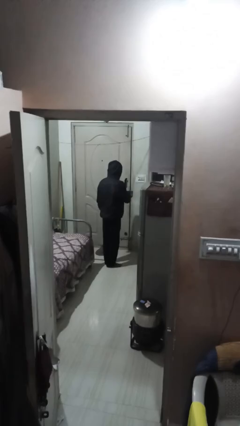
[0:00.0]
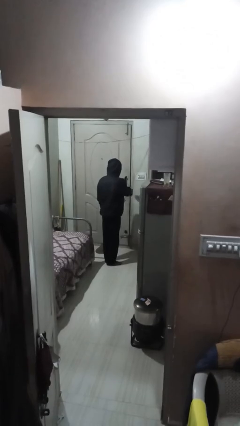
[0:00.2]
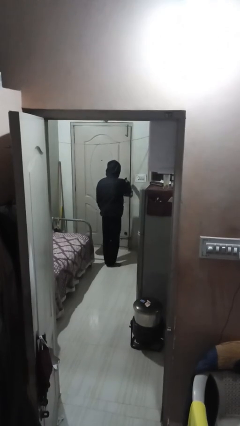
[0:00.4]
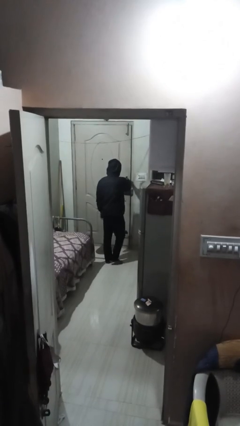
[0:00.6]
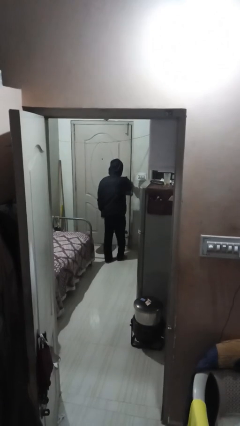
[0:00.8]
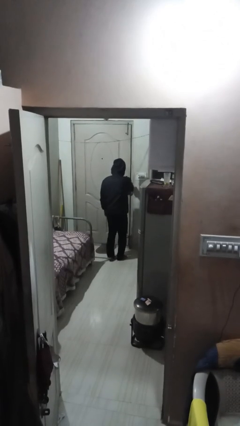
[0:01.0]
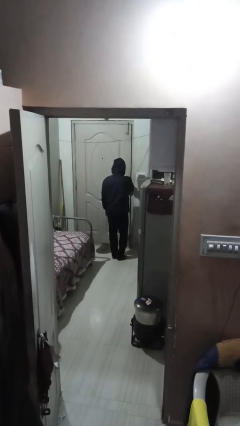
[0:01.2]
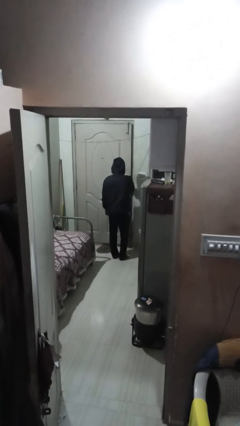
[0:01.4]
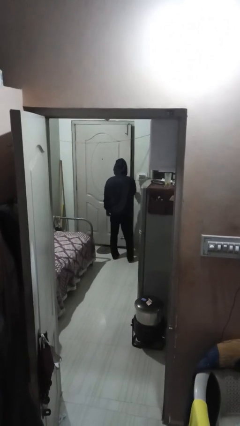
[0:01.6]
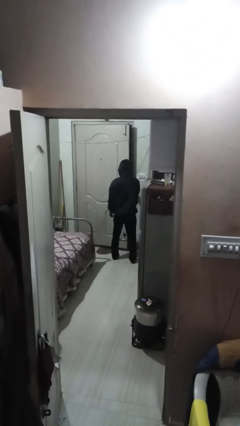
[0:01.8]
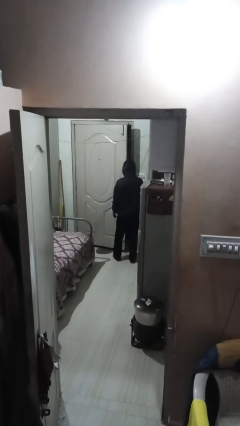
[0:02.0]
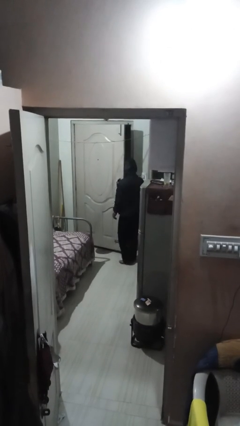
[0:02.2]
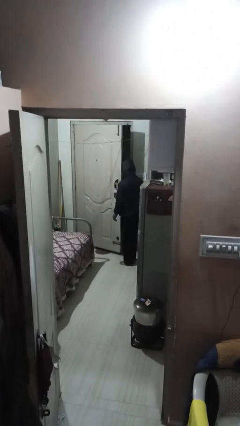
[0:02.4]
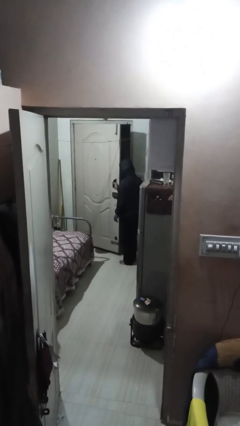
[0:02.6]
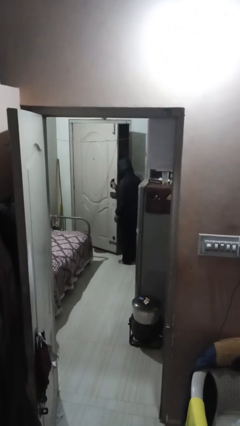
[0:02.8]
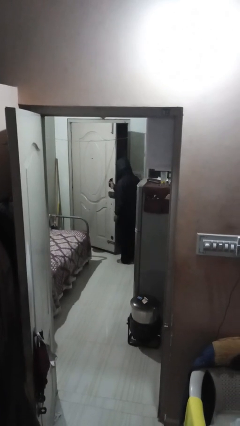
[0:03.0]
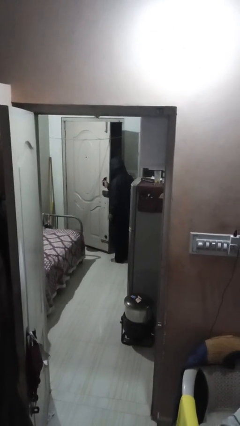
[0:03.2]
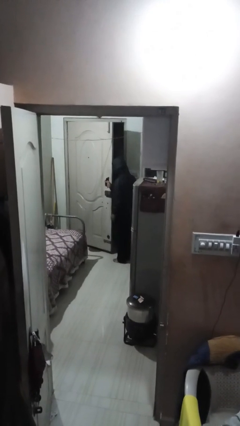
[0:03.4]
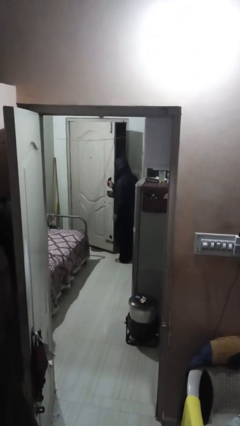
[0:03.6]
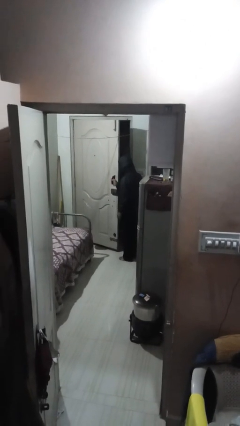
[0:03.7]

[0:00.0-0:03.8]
person opens facility door

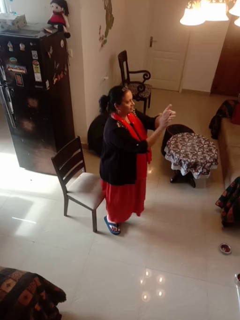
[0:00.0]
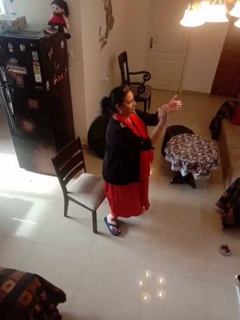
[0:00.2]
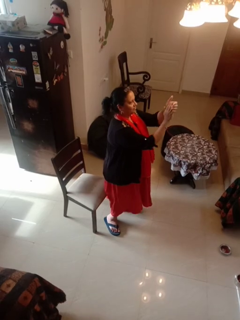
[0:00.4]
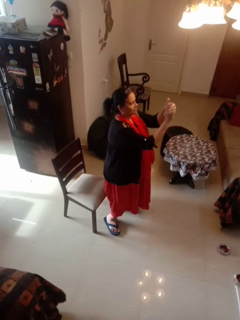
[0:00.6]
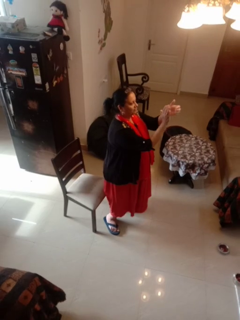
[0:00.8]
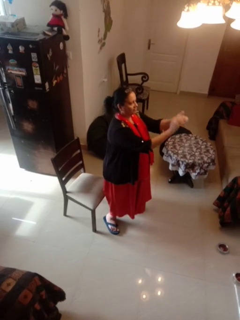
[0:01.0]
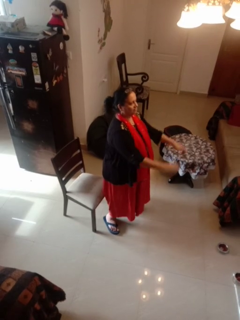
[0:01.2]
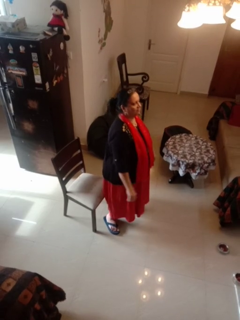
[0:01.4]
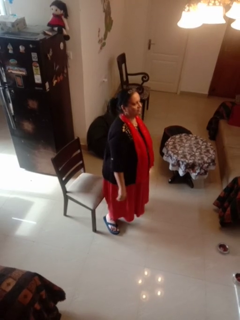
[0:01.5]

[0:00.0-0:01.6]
person claps hands

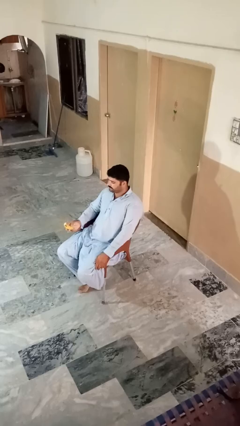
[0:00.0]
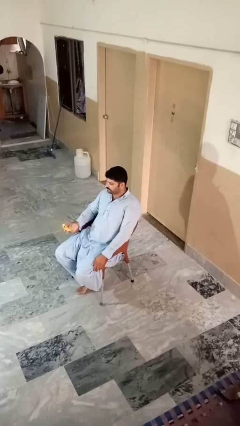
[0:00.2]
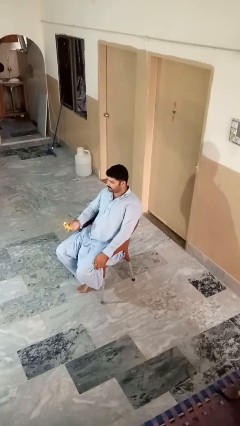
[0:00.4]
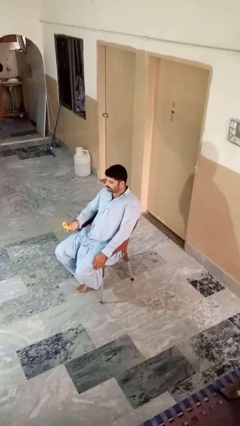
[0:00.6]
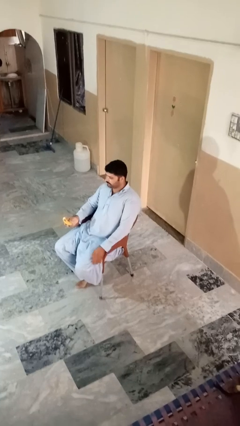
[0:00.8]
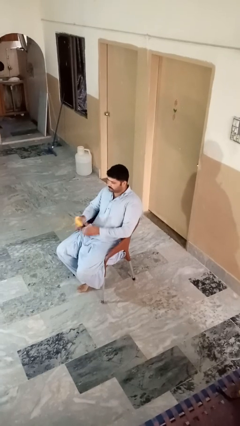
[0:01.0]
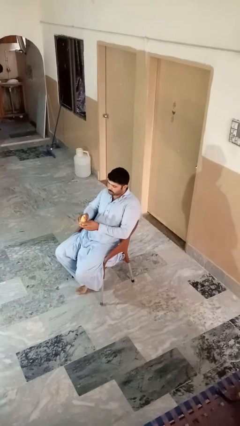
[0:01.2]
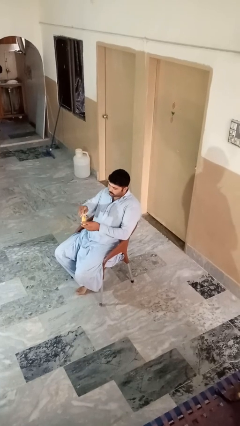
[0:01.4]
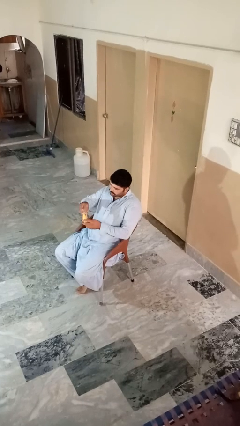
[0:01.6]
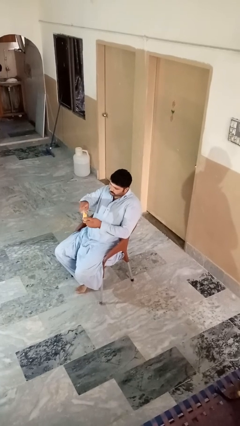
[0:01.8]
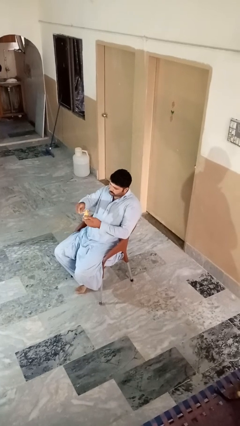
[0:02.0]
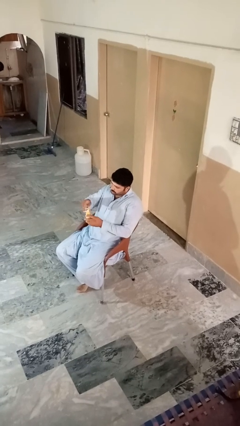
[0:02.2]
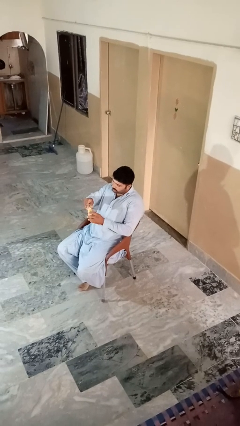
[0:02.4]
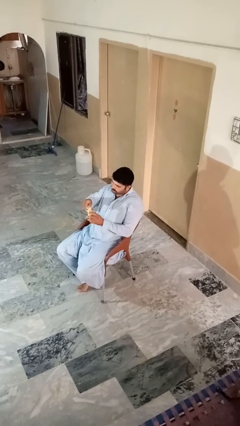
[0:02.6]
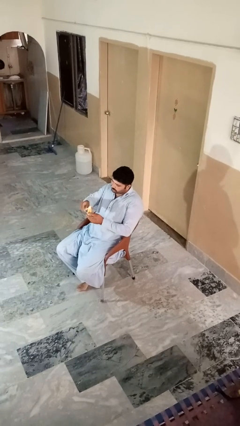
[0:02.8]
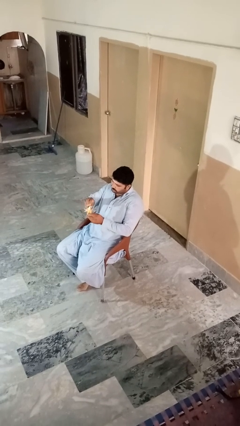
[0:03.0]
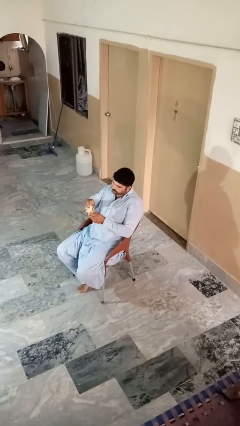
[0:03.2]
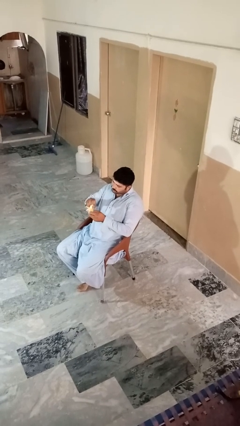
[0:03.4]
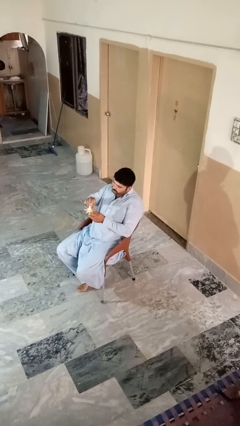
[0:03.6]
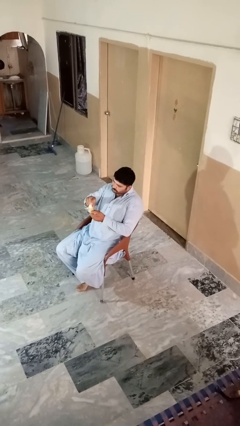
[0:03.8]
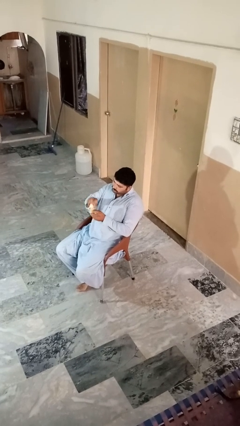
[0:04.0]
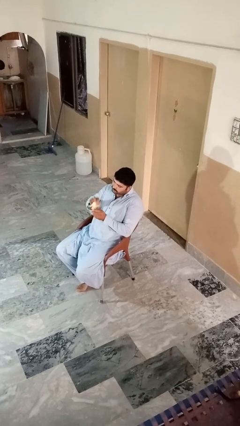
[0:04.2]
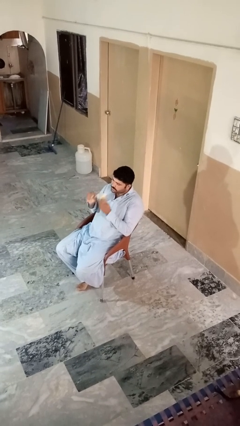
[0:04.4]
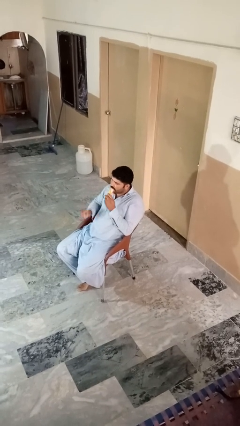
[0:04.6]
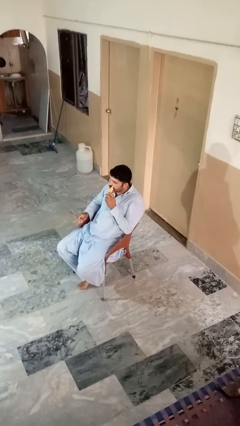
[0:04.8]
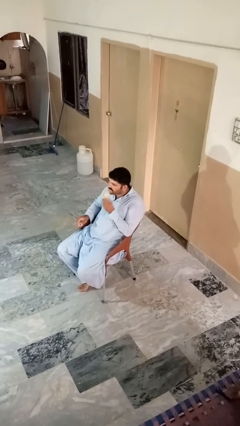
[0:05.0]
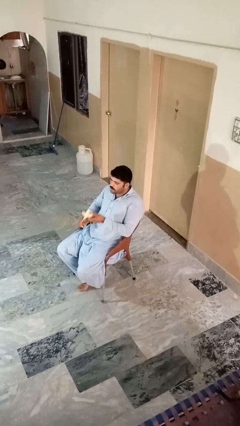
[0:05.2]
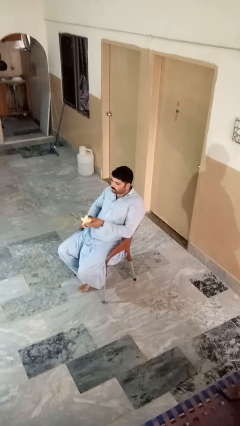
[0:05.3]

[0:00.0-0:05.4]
person eats banana

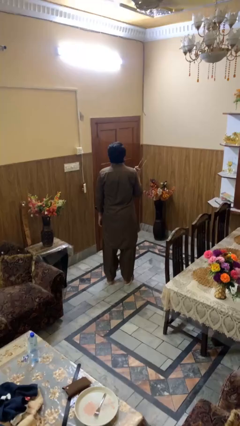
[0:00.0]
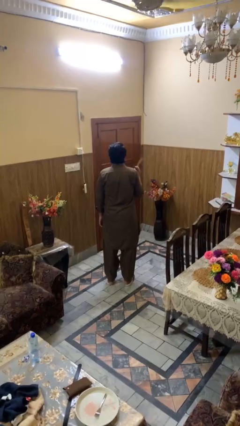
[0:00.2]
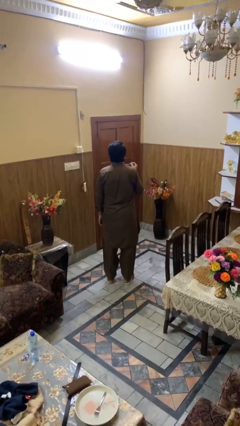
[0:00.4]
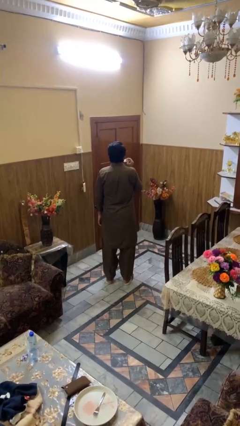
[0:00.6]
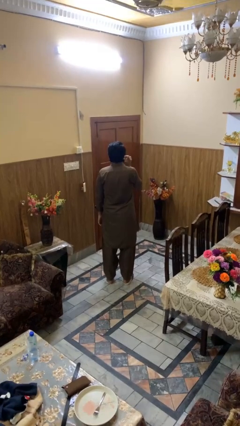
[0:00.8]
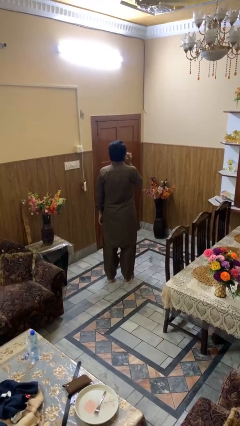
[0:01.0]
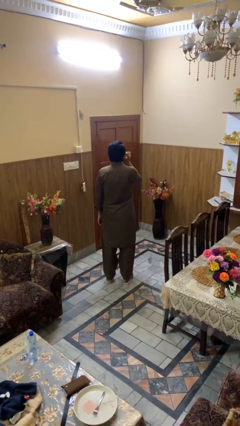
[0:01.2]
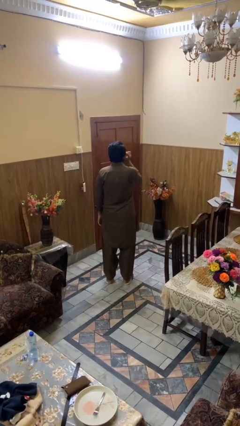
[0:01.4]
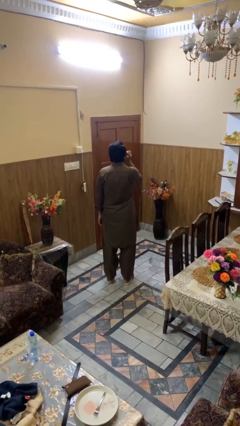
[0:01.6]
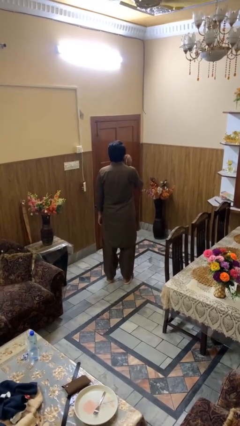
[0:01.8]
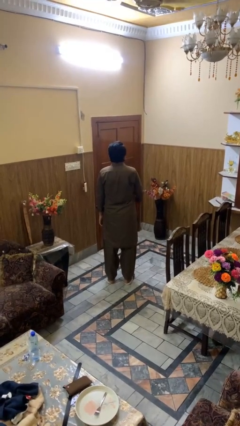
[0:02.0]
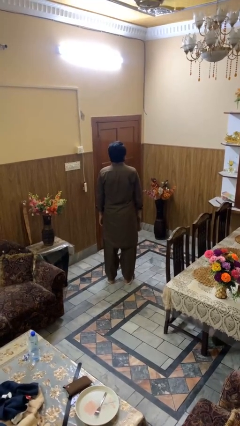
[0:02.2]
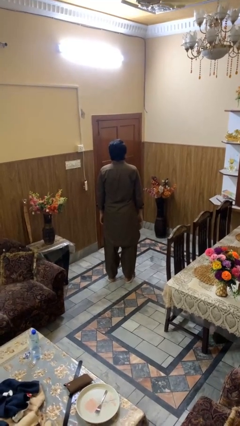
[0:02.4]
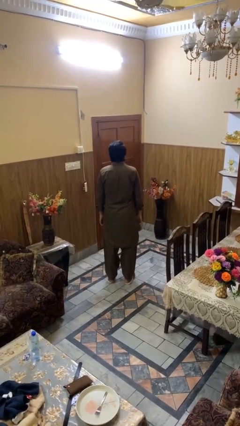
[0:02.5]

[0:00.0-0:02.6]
person puts on sunglasses

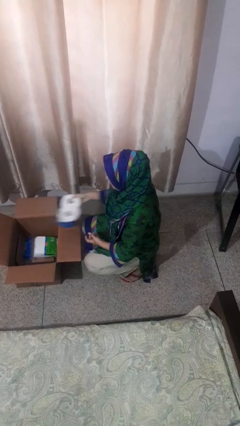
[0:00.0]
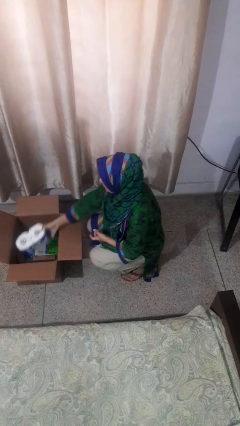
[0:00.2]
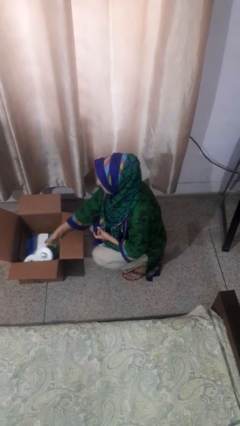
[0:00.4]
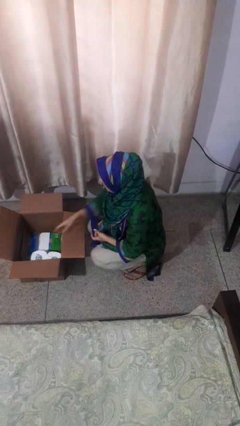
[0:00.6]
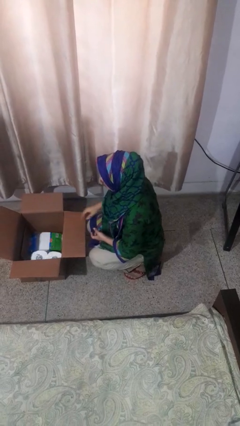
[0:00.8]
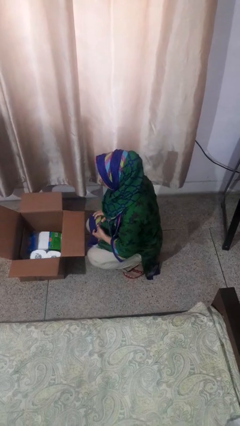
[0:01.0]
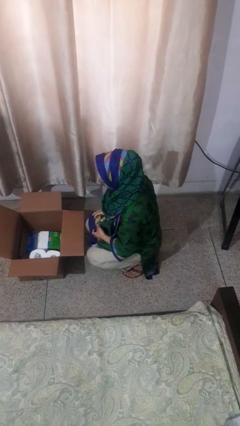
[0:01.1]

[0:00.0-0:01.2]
person puts object into box

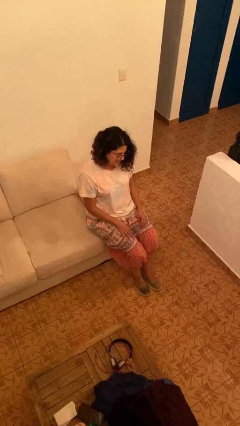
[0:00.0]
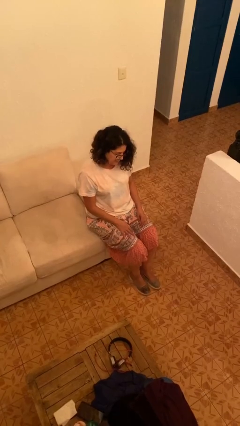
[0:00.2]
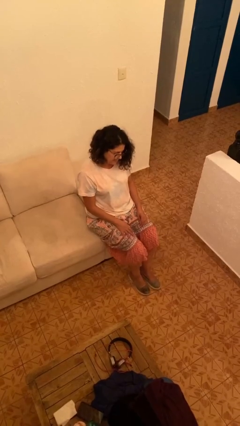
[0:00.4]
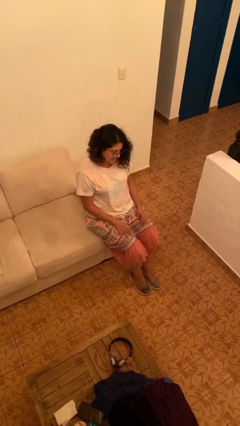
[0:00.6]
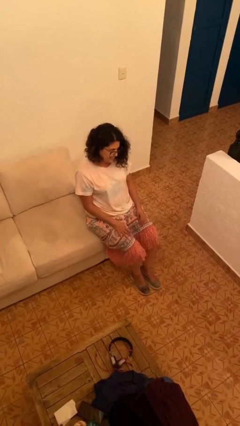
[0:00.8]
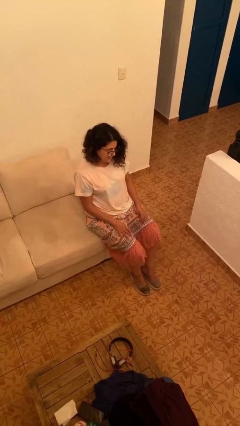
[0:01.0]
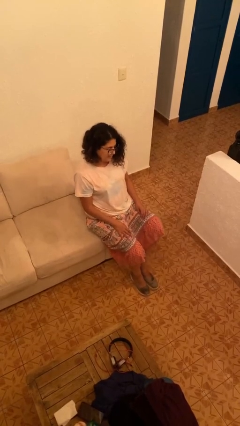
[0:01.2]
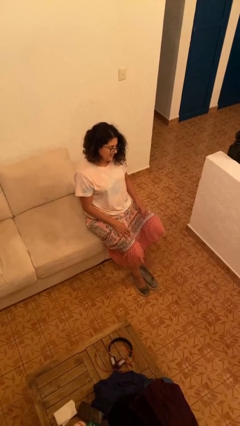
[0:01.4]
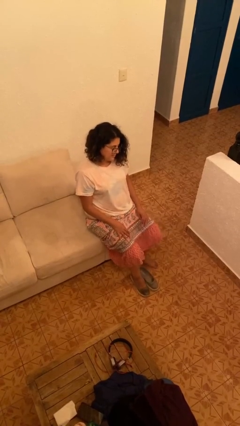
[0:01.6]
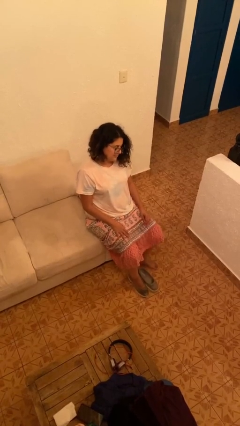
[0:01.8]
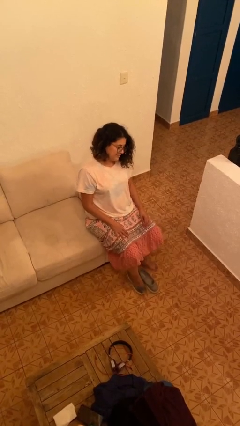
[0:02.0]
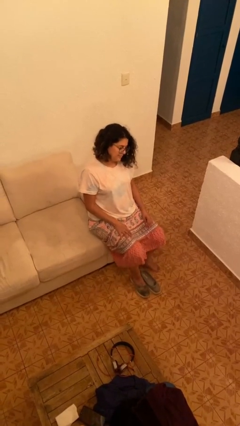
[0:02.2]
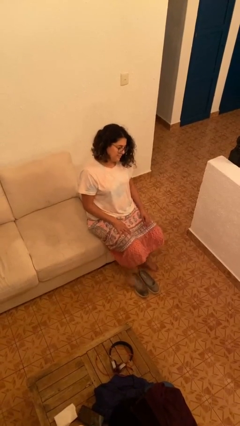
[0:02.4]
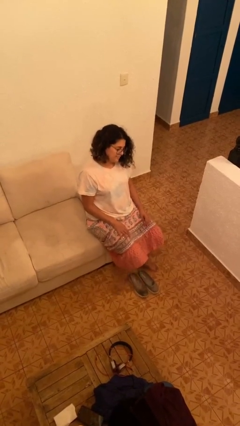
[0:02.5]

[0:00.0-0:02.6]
person takes off shoes

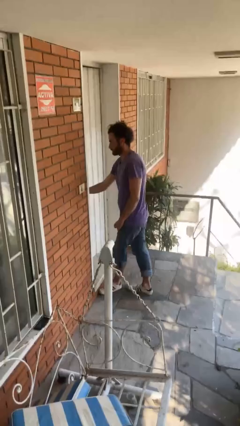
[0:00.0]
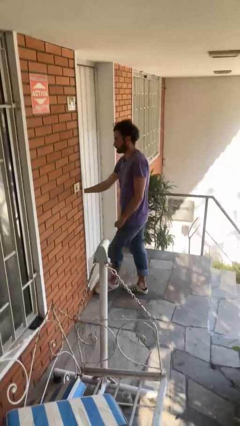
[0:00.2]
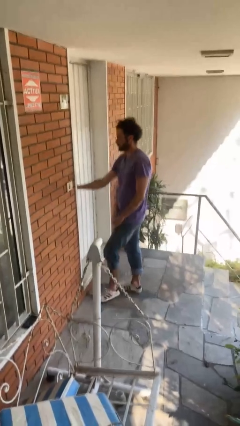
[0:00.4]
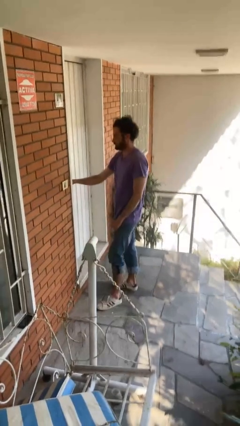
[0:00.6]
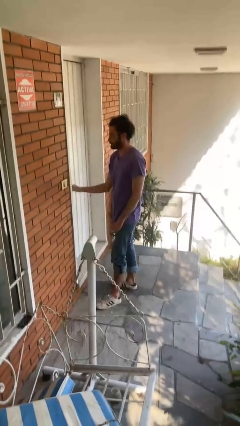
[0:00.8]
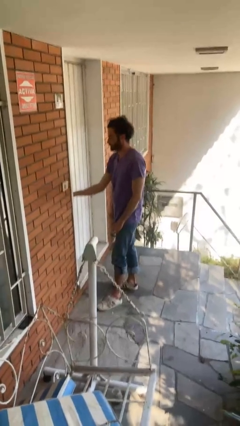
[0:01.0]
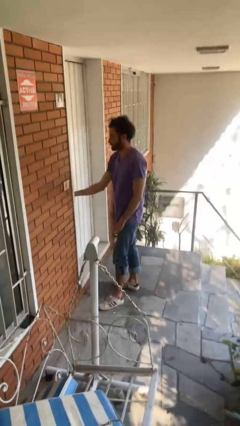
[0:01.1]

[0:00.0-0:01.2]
person closes facility door
